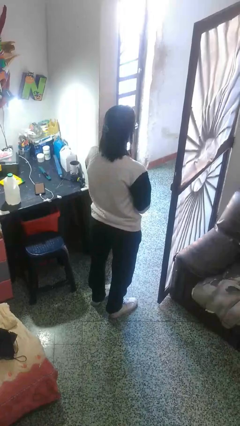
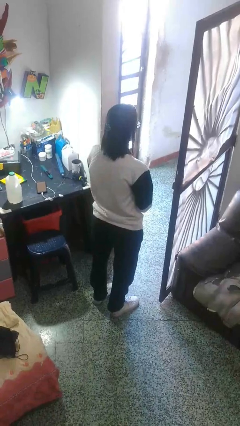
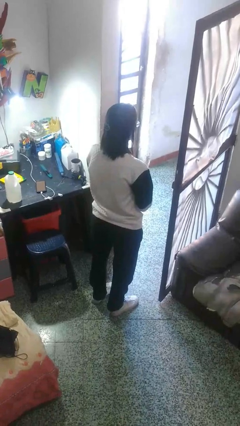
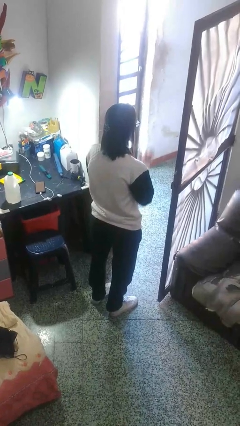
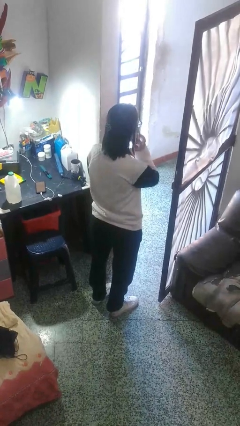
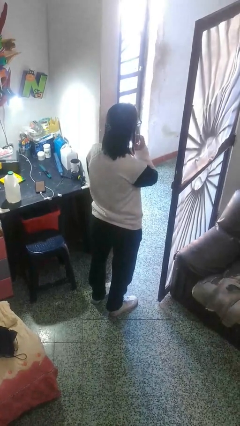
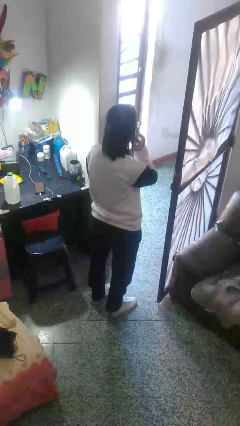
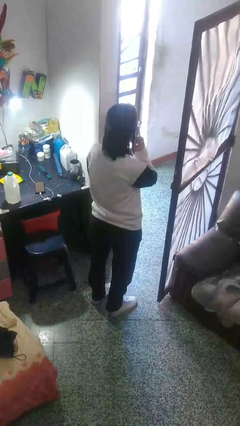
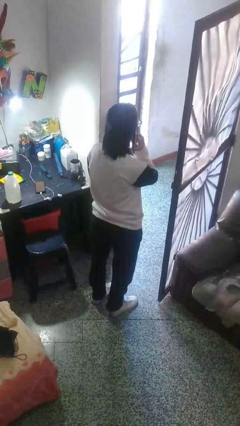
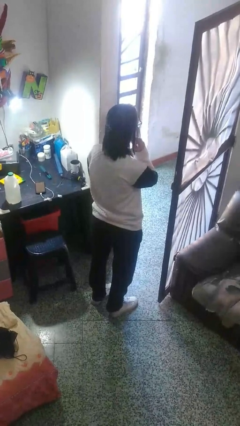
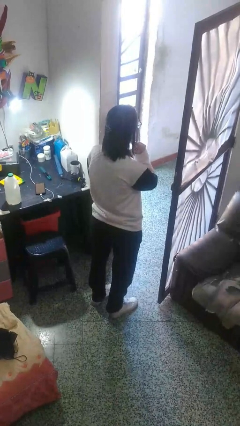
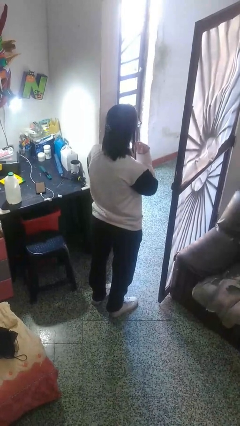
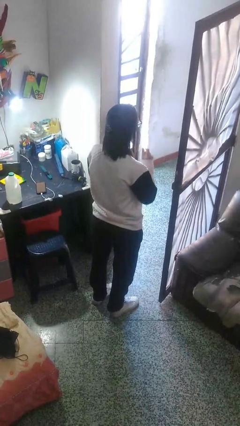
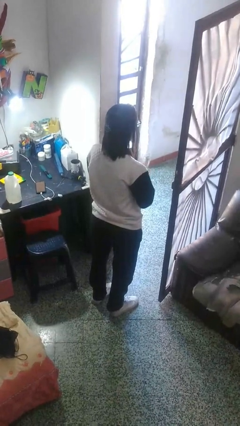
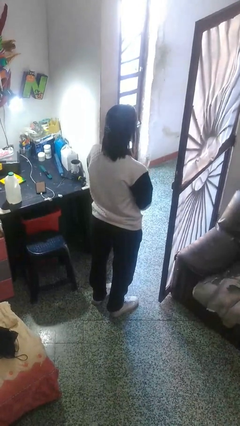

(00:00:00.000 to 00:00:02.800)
person scratches face

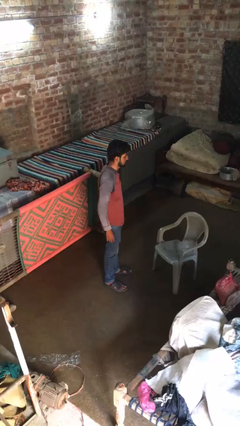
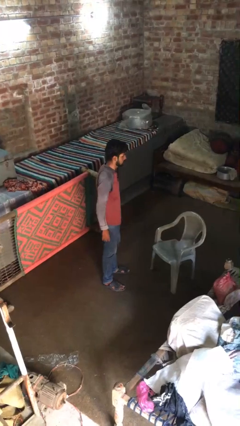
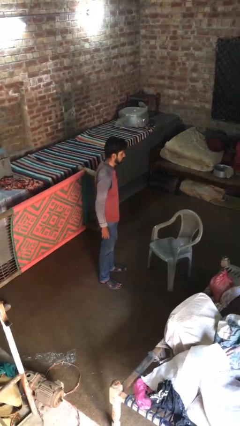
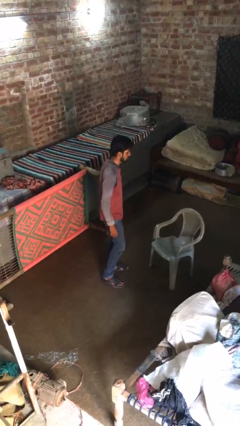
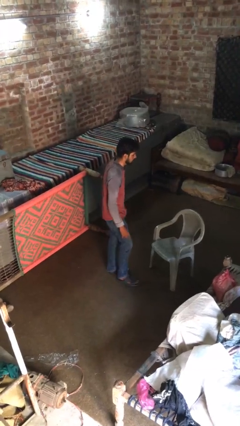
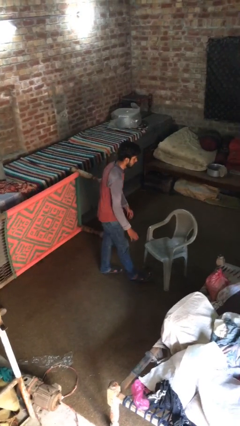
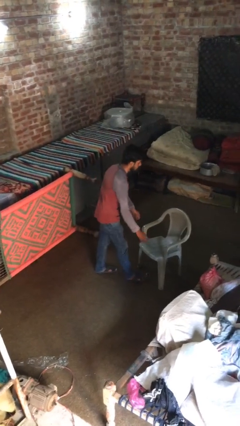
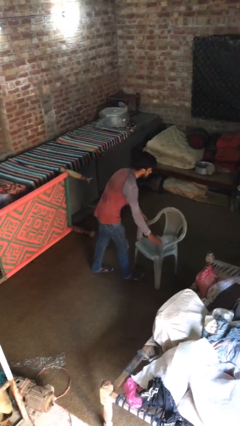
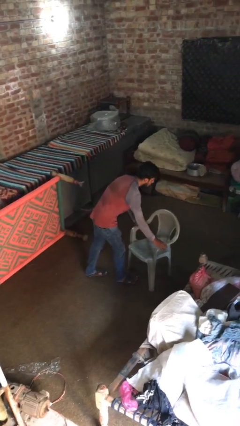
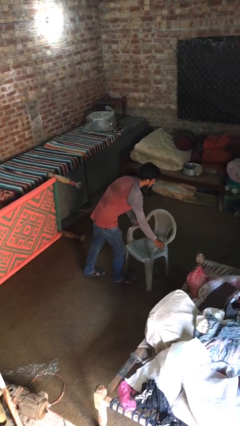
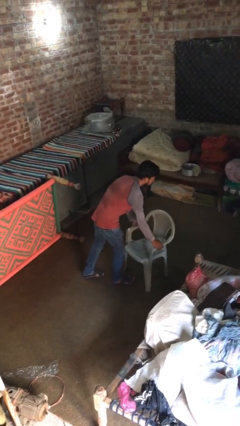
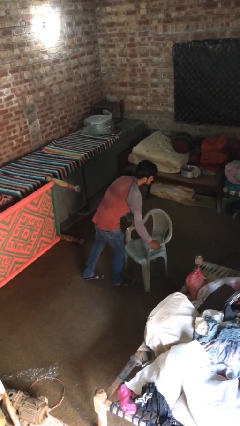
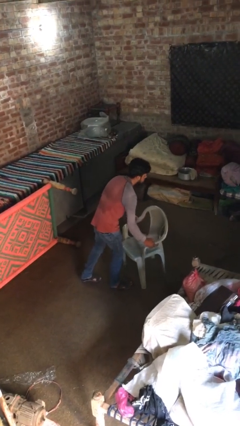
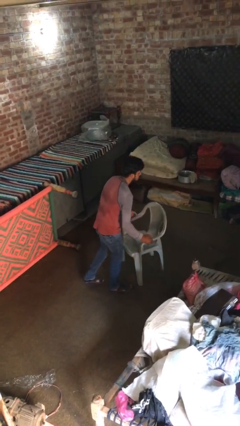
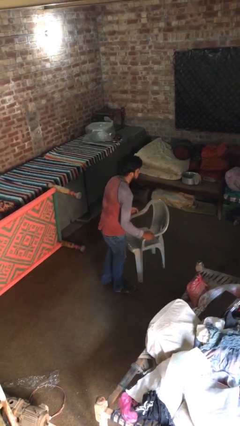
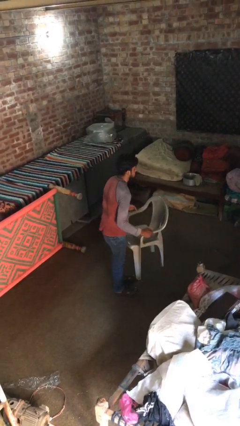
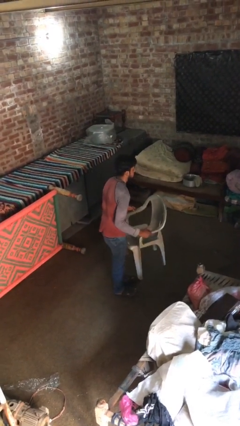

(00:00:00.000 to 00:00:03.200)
person picks up object from floor

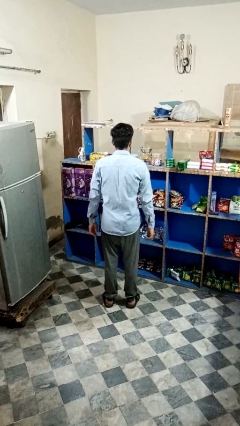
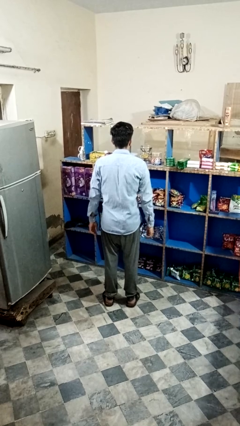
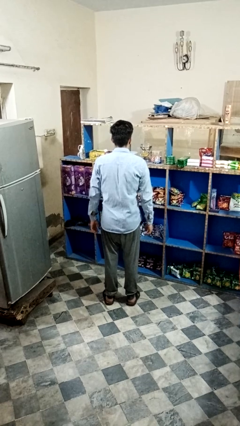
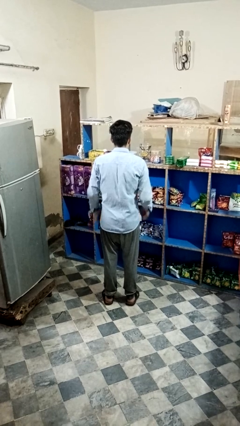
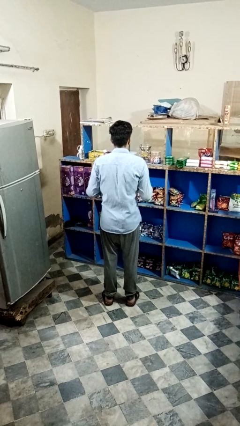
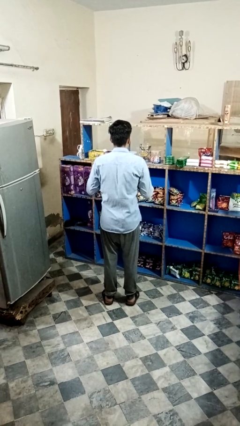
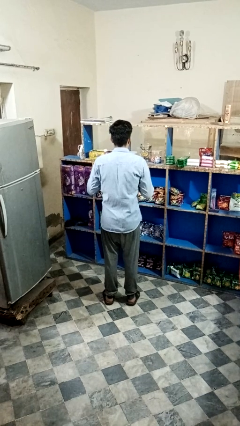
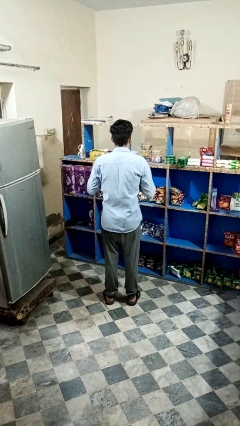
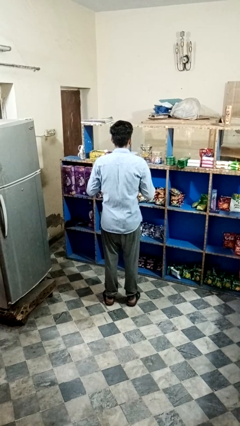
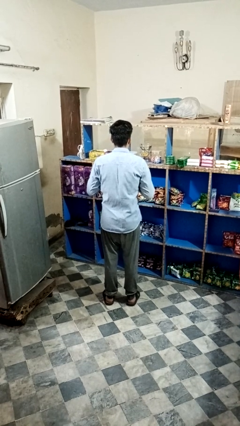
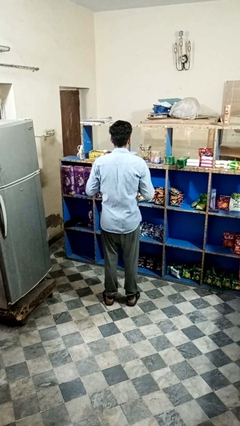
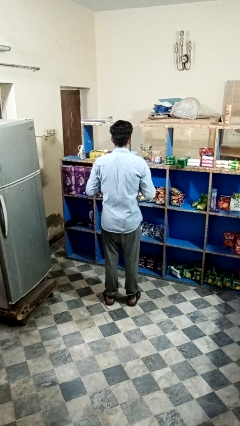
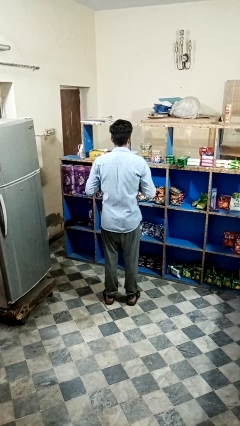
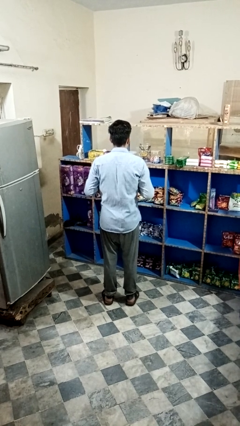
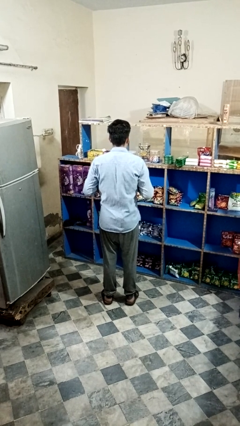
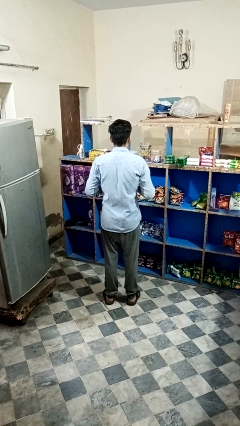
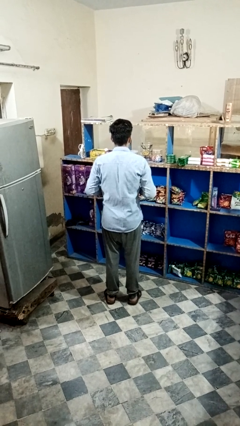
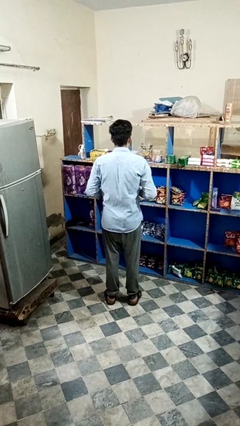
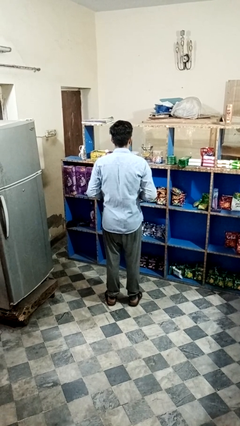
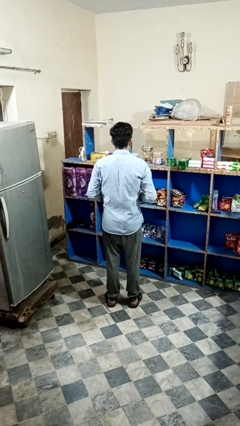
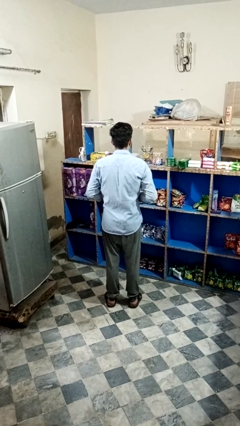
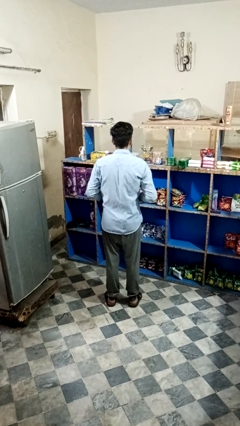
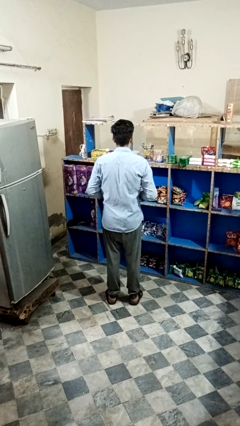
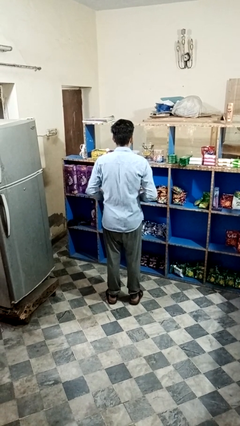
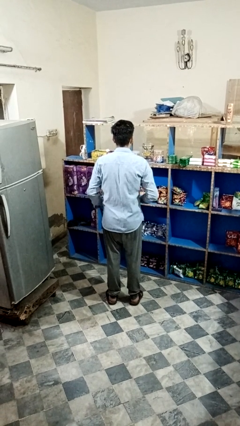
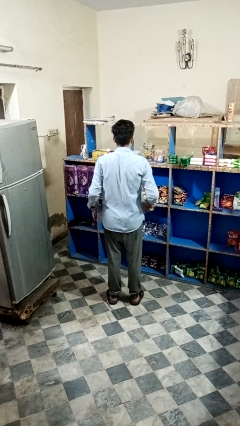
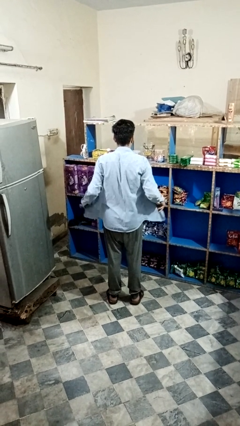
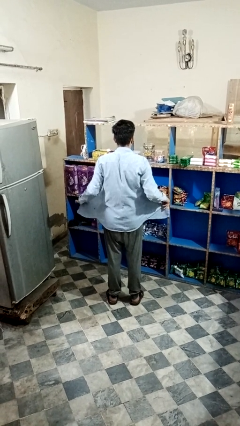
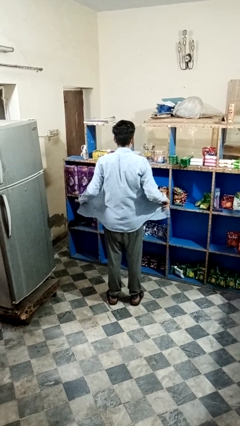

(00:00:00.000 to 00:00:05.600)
person unbuttons shirt

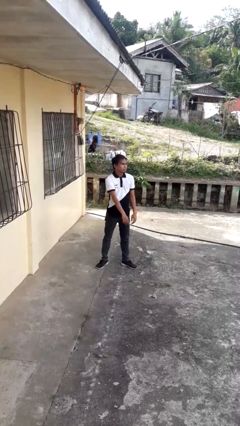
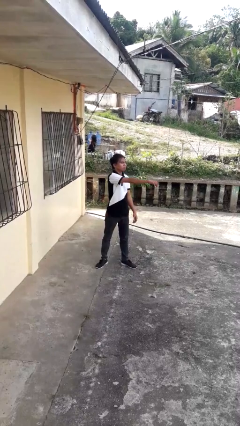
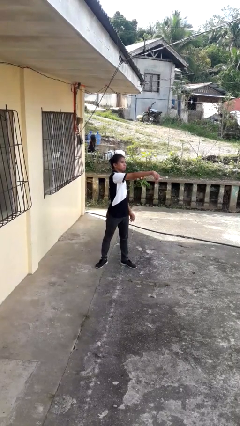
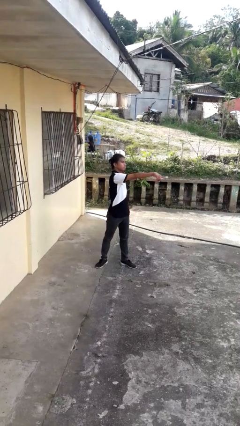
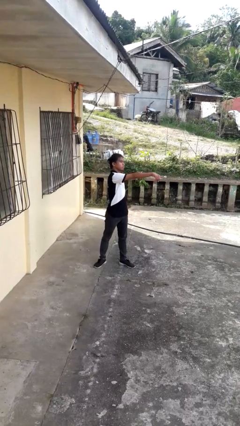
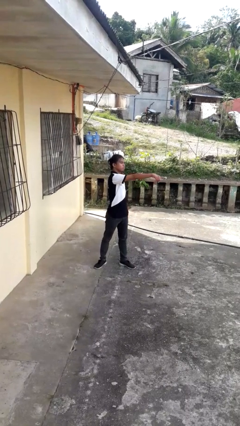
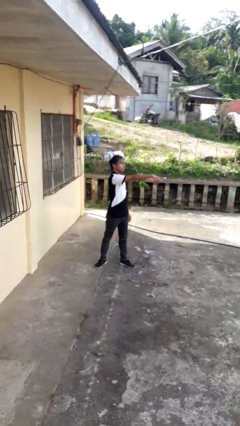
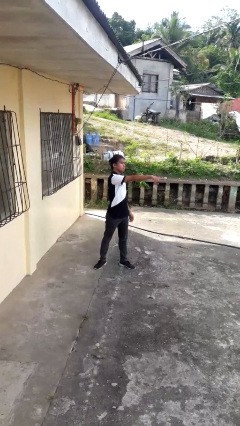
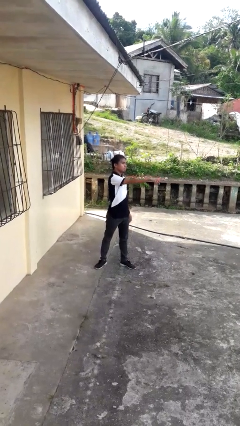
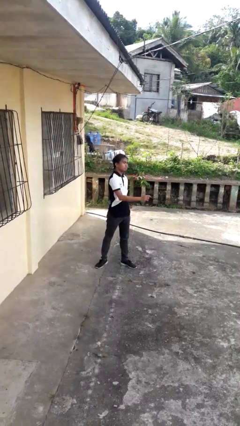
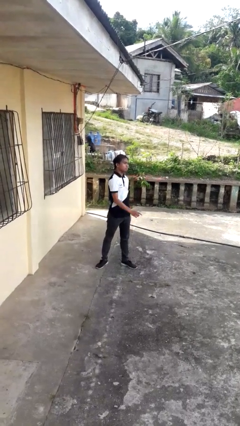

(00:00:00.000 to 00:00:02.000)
person points at person

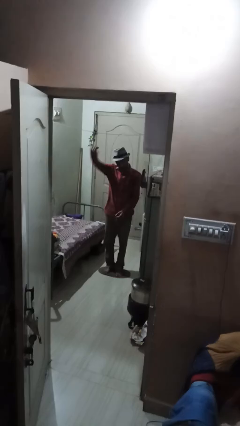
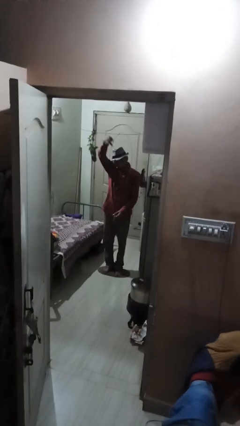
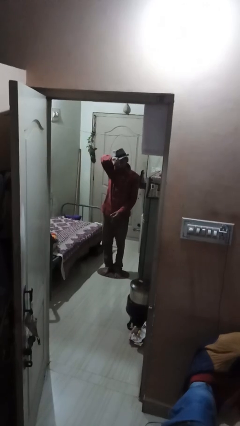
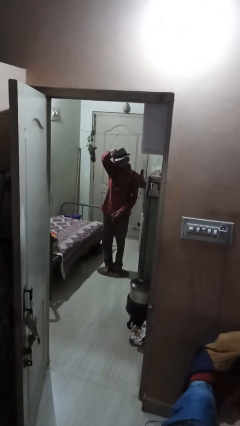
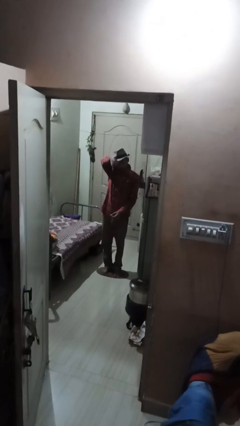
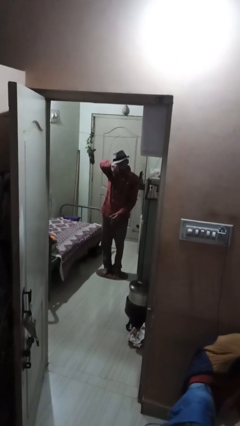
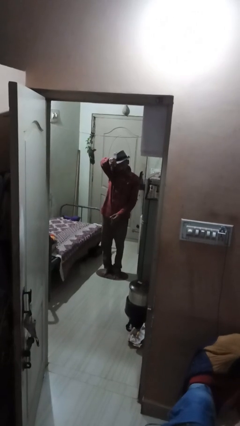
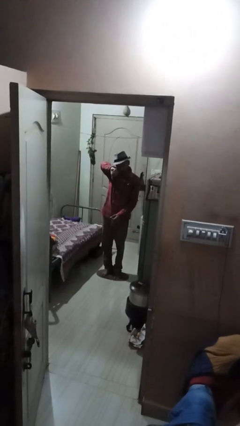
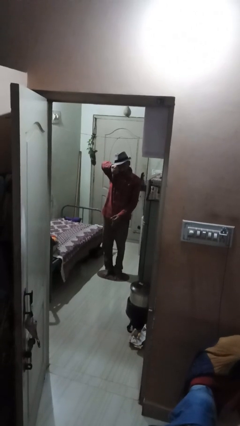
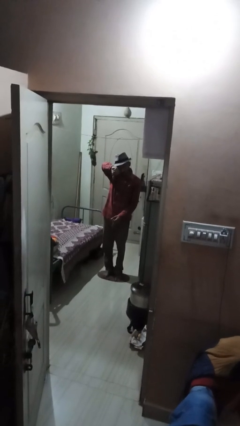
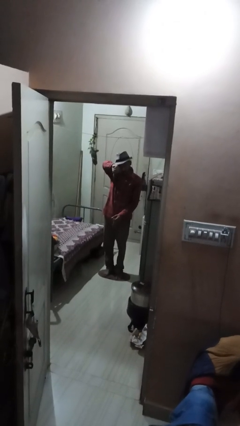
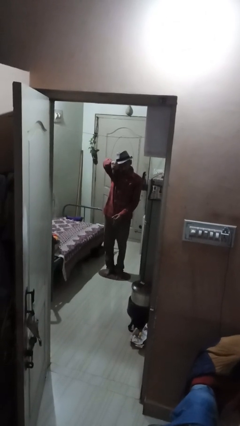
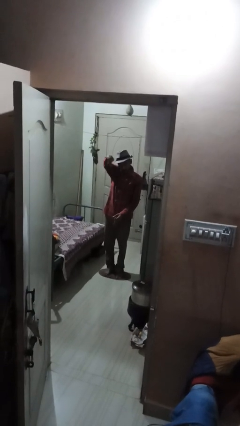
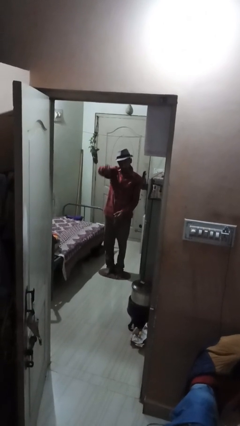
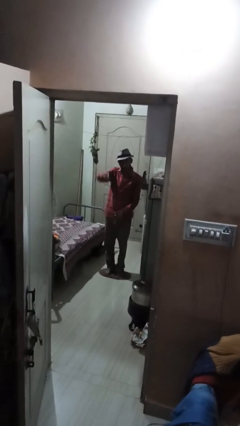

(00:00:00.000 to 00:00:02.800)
person gestures thumbs down

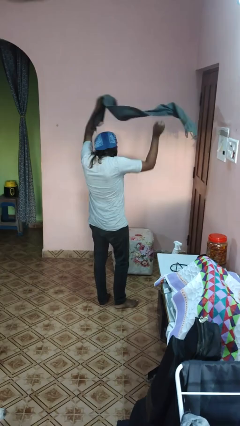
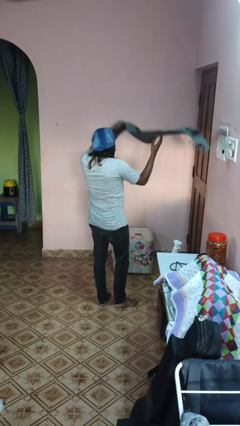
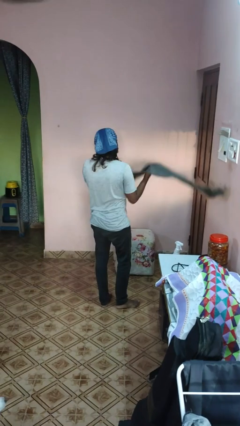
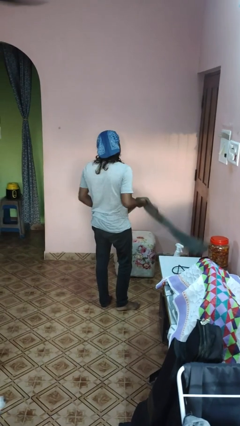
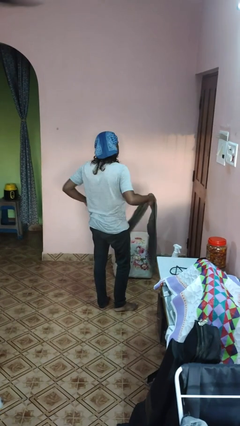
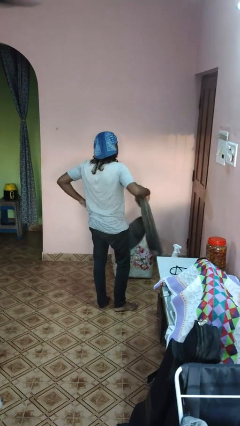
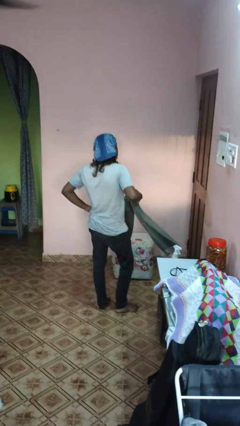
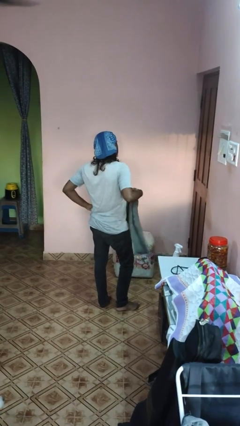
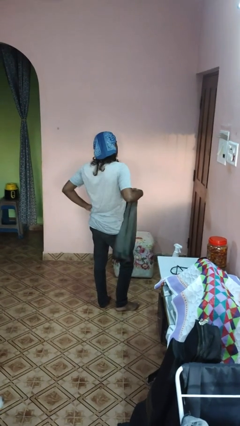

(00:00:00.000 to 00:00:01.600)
person takes off scarf
